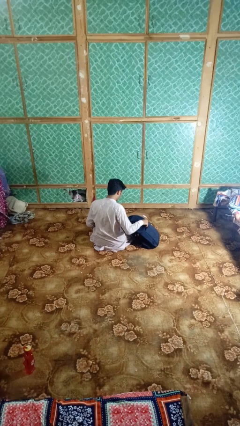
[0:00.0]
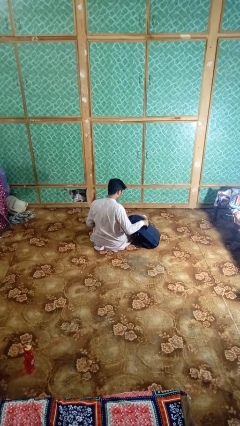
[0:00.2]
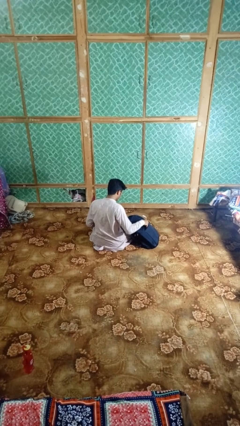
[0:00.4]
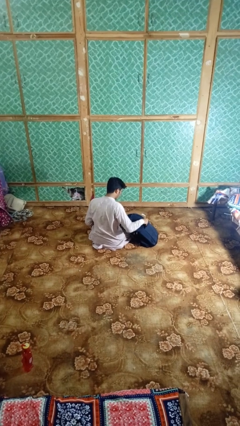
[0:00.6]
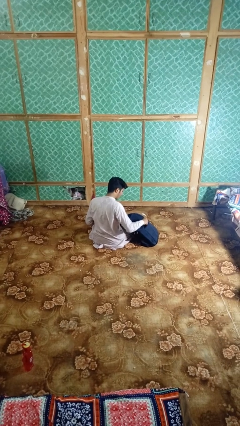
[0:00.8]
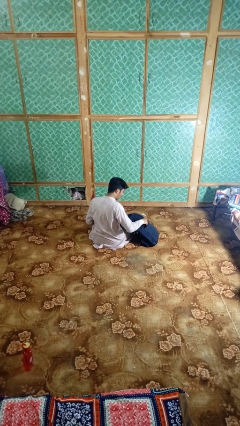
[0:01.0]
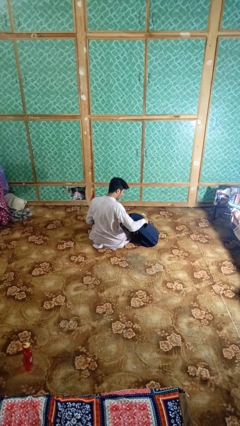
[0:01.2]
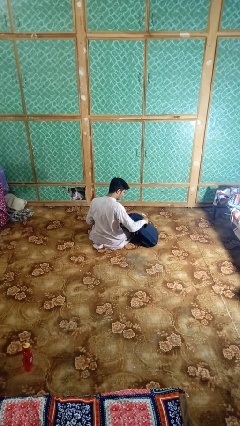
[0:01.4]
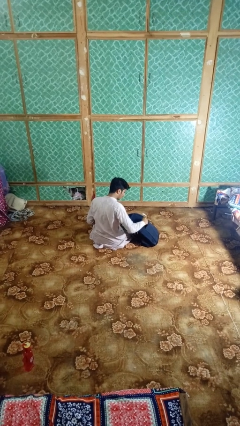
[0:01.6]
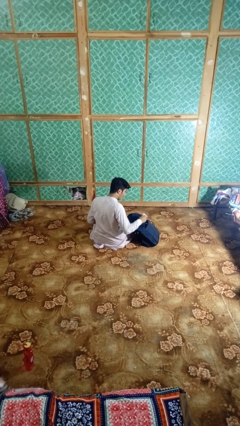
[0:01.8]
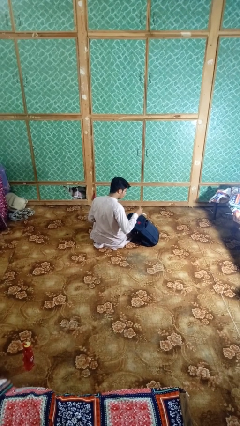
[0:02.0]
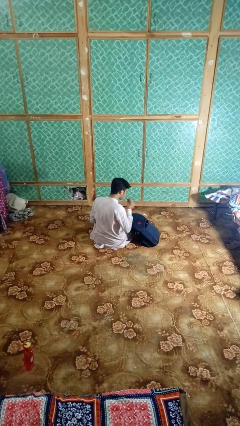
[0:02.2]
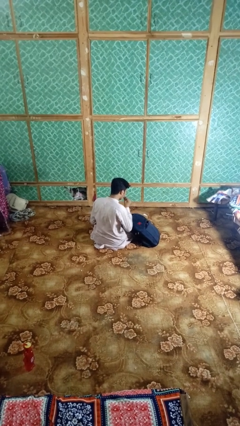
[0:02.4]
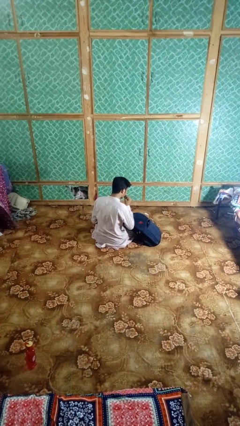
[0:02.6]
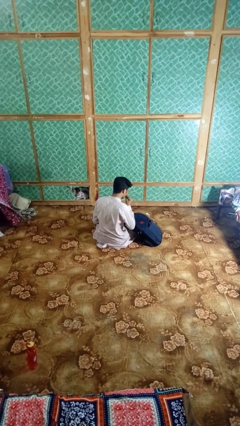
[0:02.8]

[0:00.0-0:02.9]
person eats snack from bag

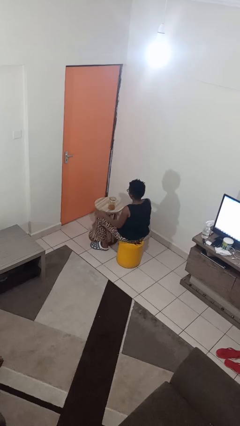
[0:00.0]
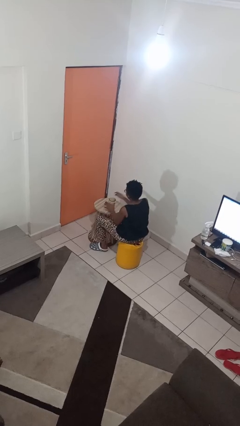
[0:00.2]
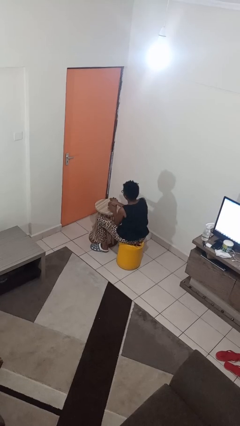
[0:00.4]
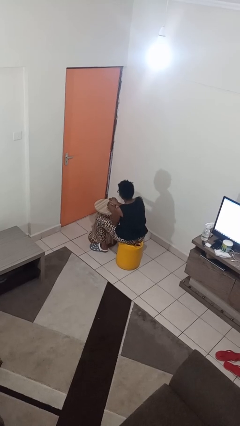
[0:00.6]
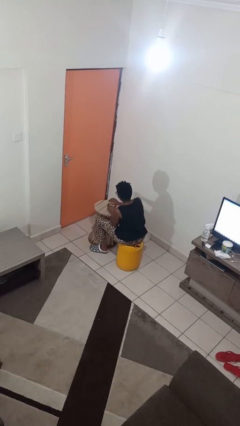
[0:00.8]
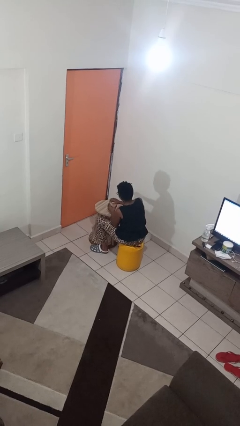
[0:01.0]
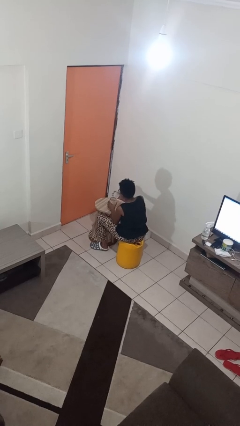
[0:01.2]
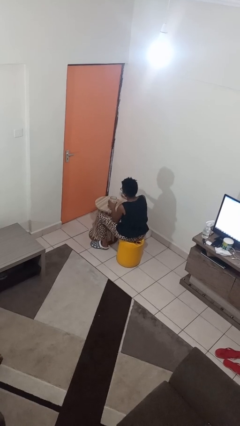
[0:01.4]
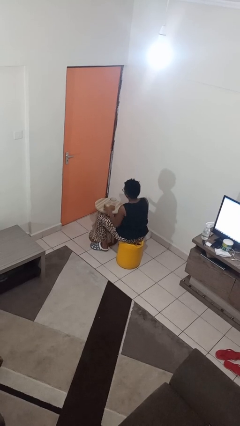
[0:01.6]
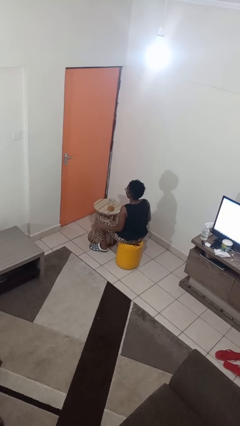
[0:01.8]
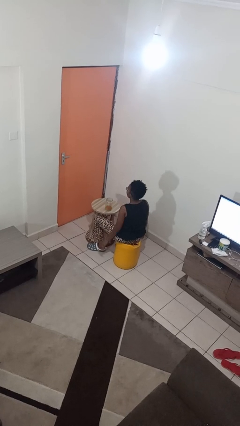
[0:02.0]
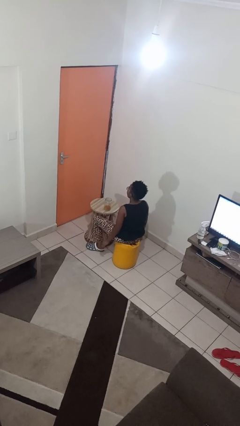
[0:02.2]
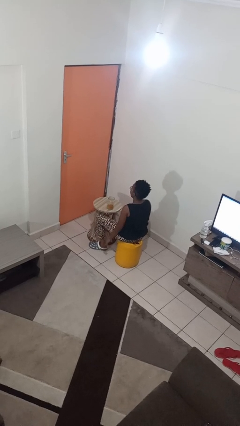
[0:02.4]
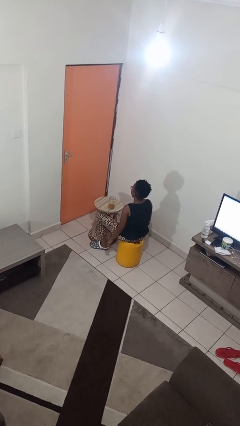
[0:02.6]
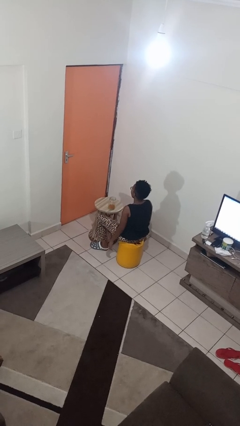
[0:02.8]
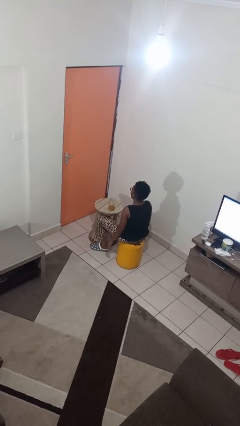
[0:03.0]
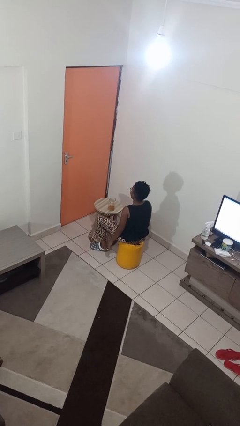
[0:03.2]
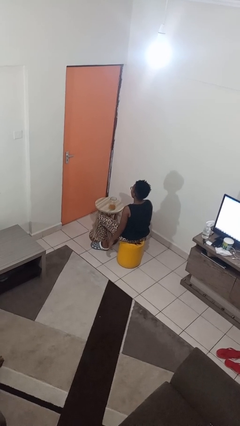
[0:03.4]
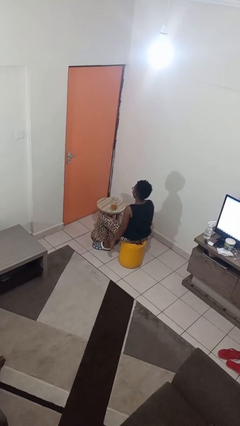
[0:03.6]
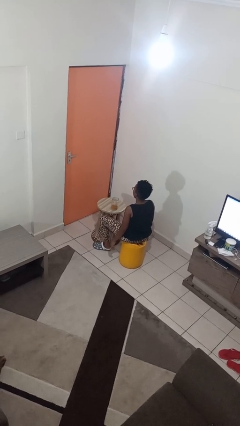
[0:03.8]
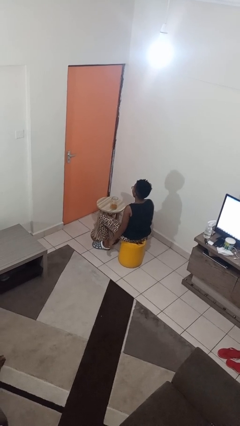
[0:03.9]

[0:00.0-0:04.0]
person opens jar

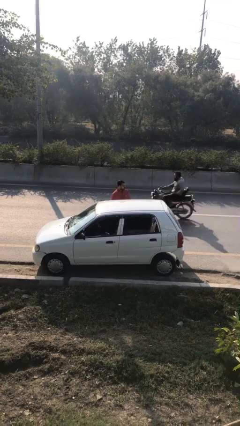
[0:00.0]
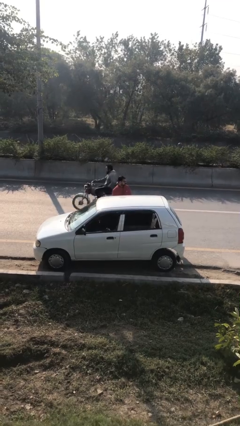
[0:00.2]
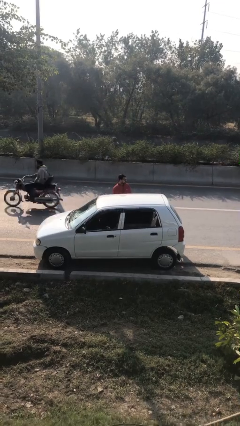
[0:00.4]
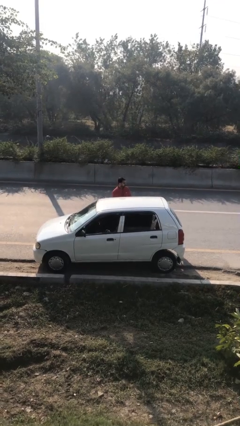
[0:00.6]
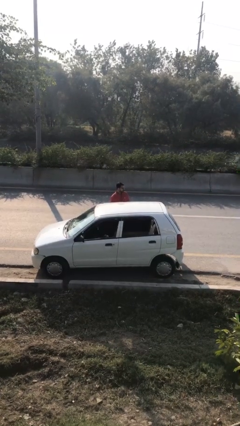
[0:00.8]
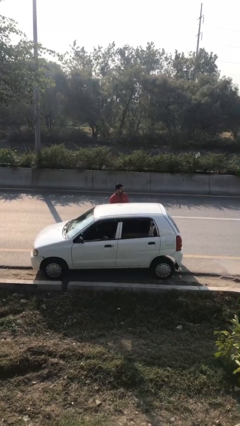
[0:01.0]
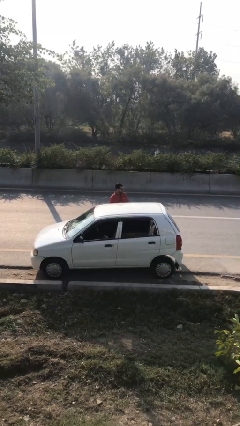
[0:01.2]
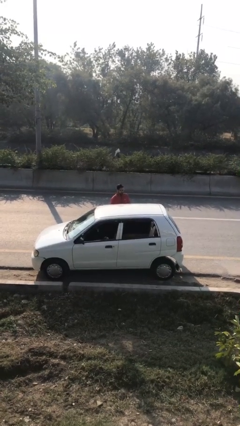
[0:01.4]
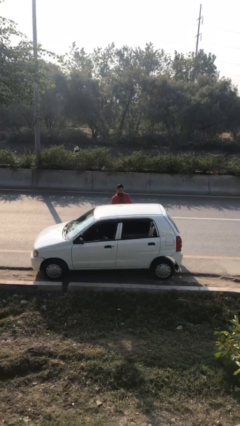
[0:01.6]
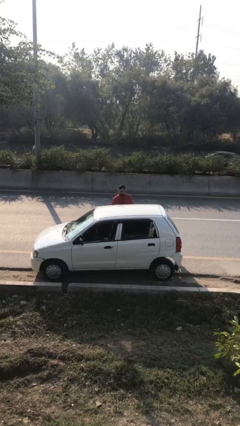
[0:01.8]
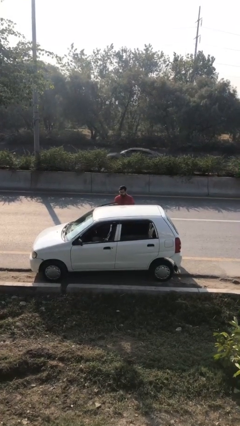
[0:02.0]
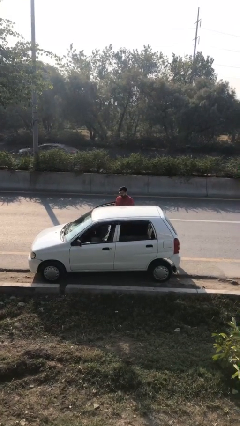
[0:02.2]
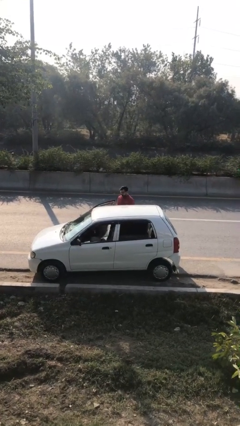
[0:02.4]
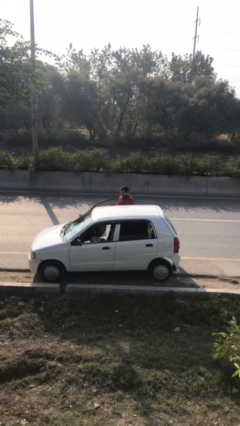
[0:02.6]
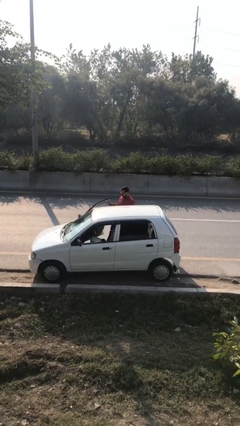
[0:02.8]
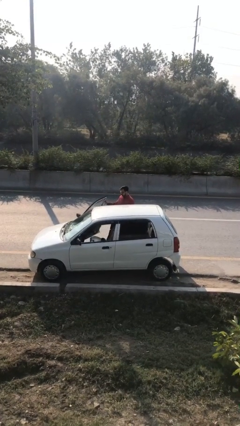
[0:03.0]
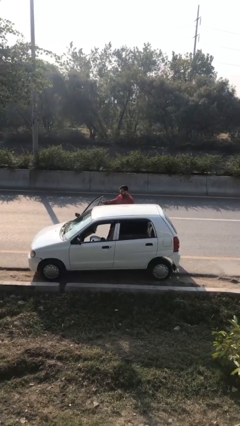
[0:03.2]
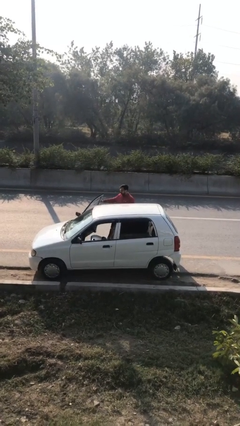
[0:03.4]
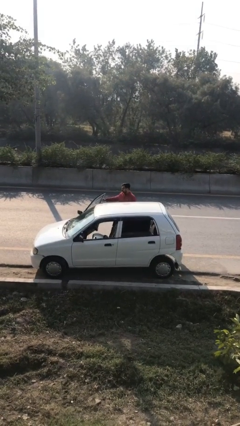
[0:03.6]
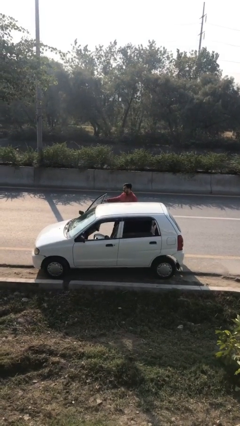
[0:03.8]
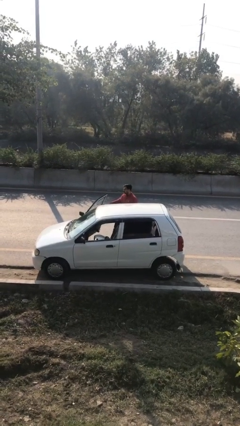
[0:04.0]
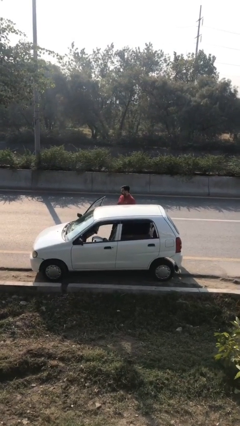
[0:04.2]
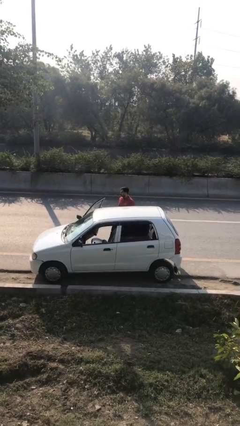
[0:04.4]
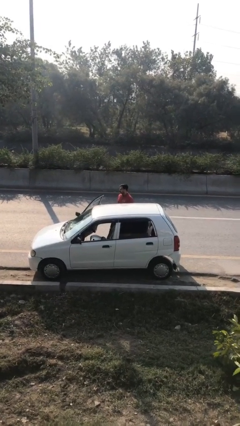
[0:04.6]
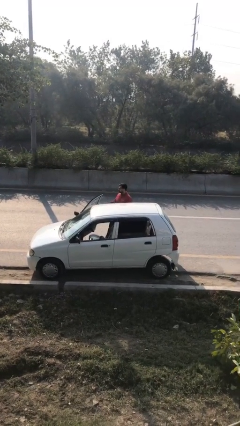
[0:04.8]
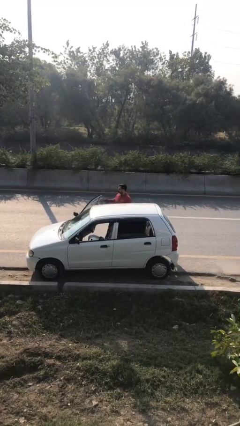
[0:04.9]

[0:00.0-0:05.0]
person opens car door

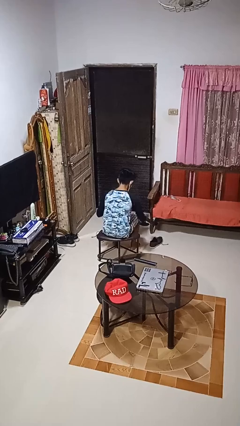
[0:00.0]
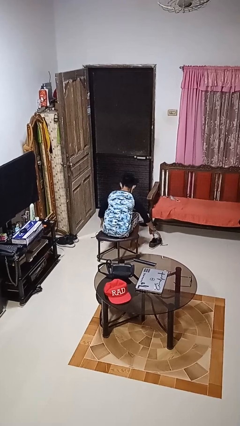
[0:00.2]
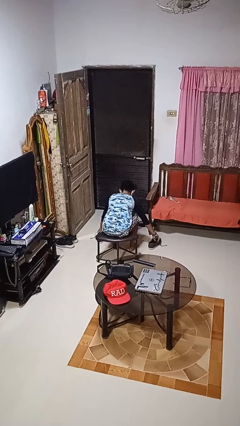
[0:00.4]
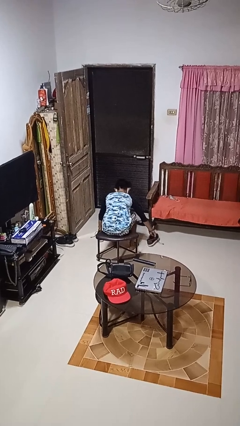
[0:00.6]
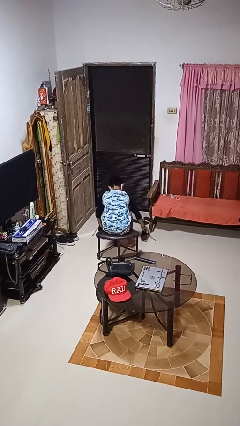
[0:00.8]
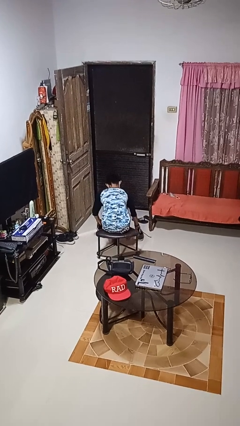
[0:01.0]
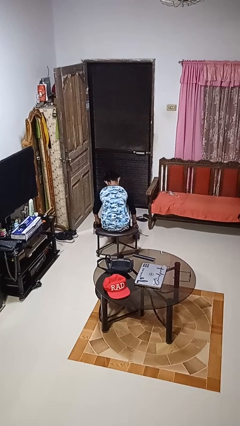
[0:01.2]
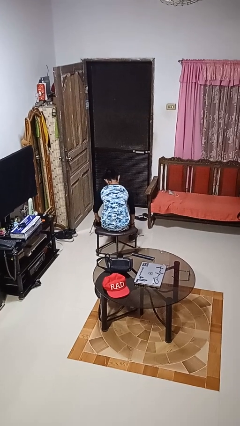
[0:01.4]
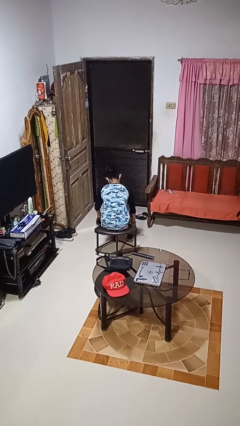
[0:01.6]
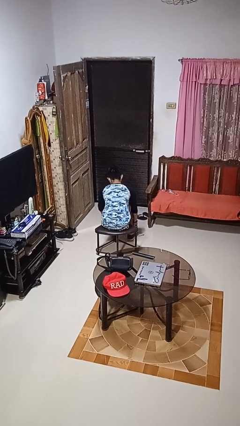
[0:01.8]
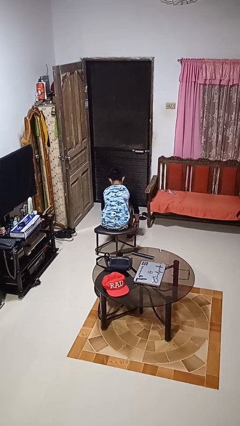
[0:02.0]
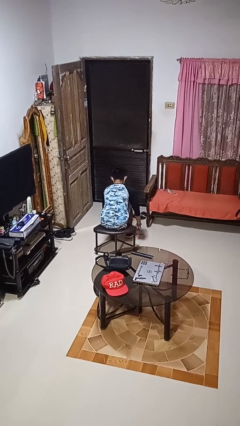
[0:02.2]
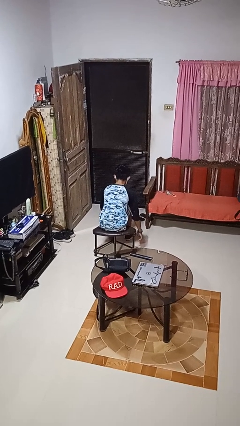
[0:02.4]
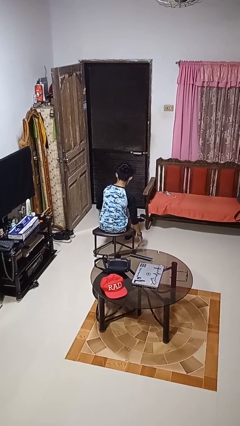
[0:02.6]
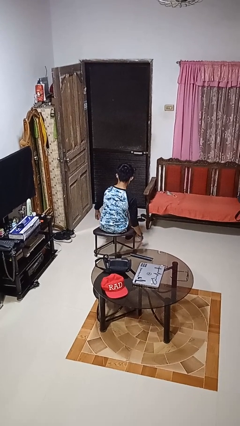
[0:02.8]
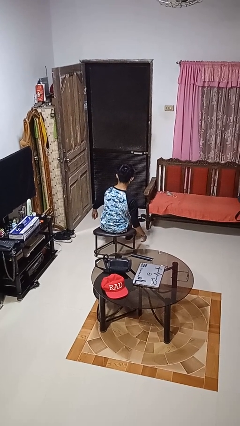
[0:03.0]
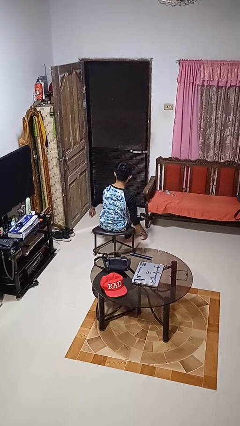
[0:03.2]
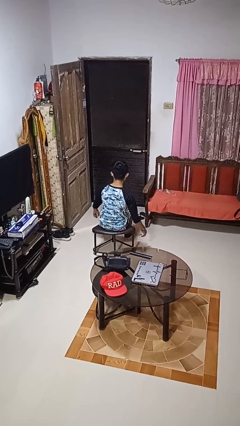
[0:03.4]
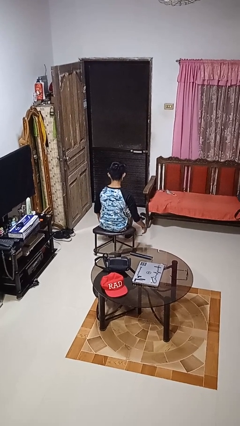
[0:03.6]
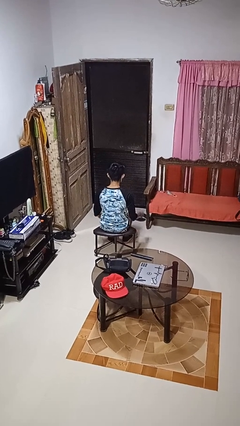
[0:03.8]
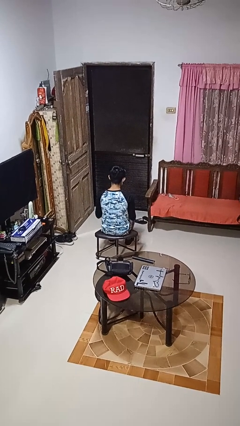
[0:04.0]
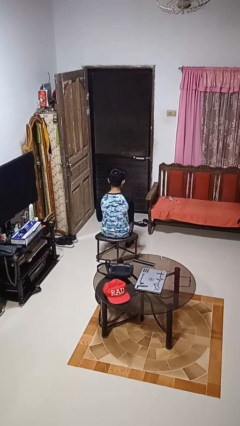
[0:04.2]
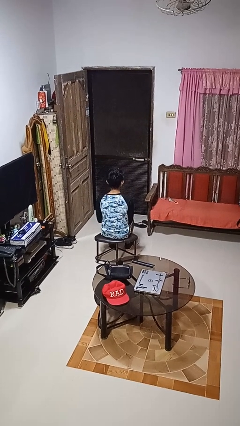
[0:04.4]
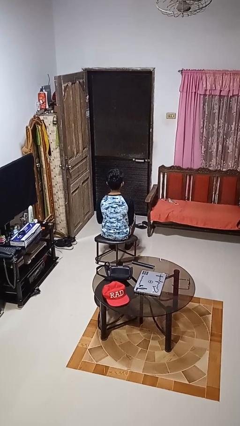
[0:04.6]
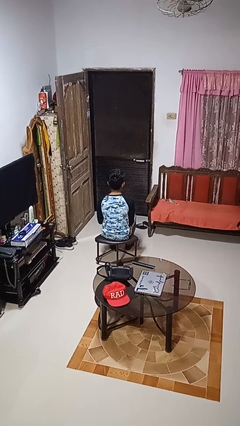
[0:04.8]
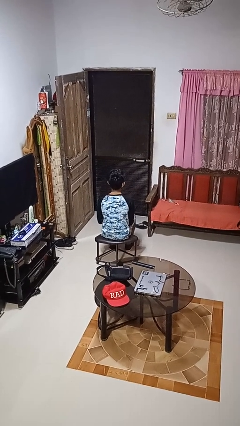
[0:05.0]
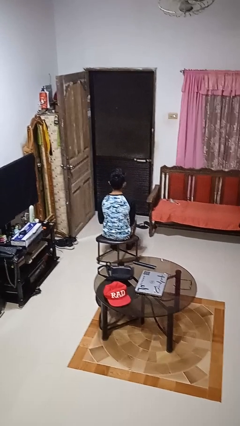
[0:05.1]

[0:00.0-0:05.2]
person puts on shoes

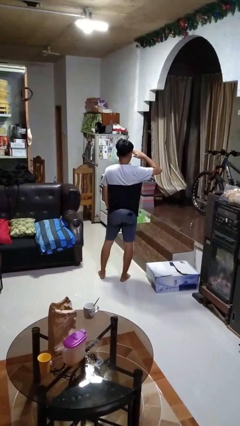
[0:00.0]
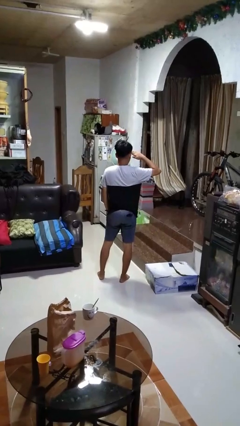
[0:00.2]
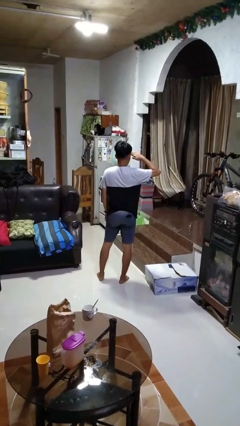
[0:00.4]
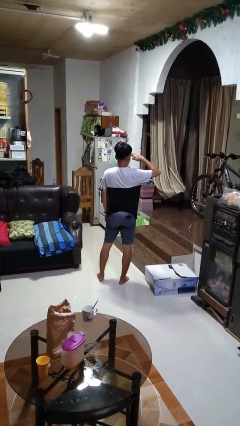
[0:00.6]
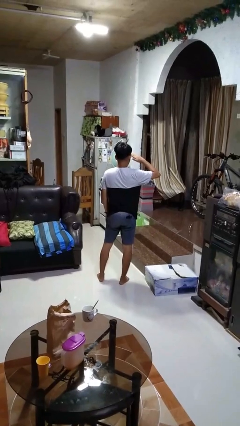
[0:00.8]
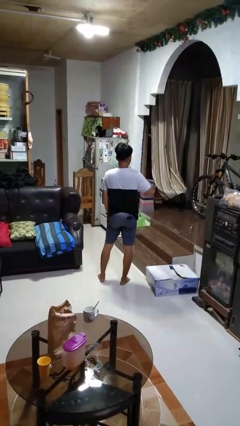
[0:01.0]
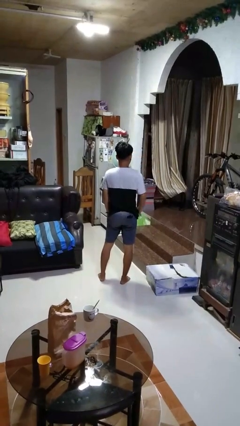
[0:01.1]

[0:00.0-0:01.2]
person salutes
